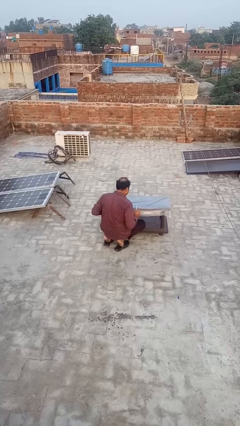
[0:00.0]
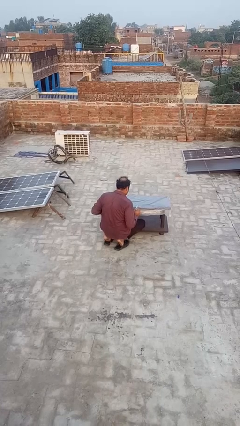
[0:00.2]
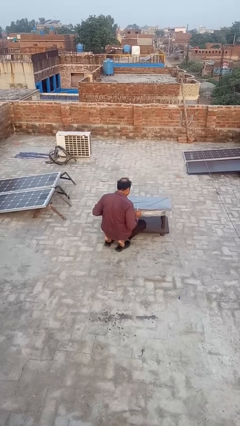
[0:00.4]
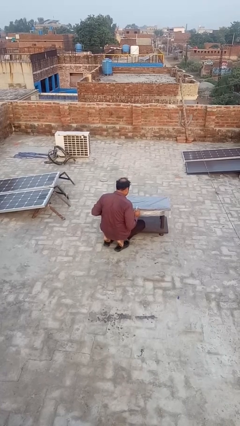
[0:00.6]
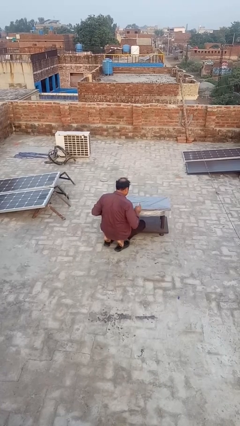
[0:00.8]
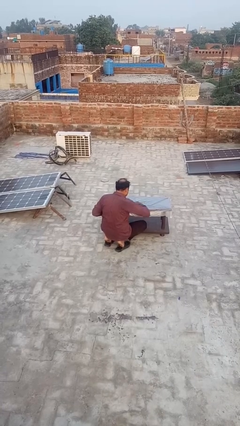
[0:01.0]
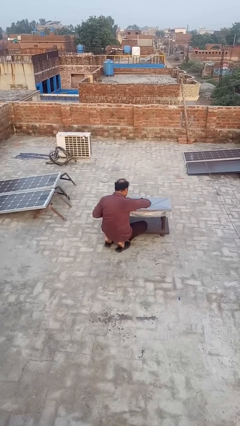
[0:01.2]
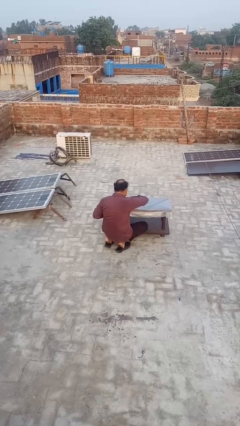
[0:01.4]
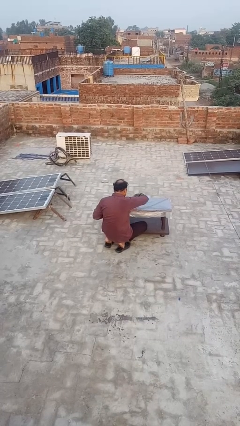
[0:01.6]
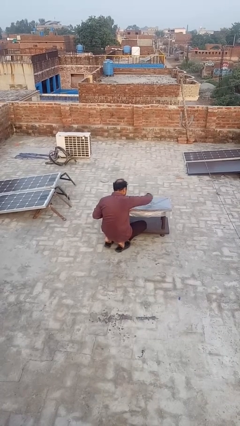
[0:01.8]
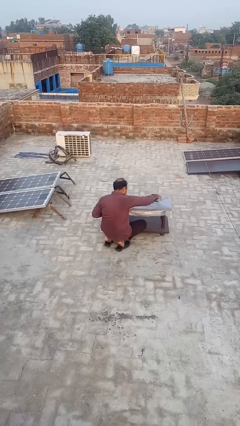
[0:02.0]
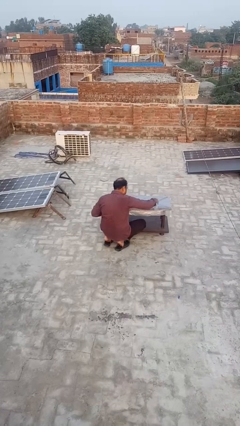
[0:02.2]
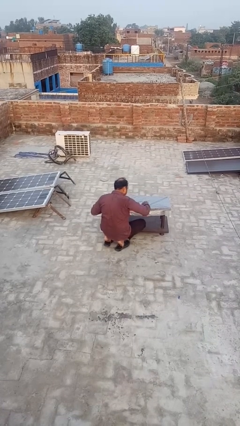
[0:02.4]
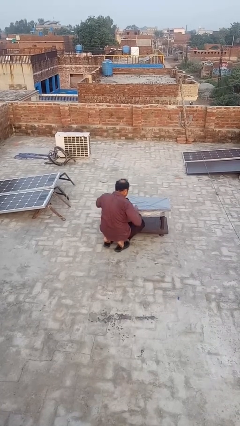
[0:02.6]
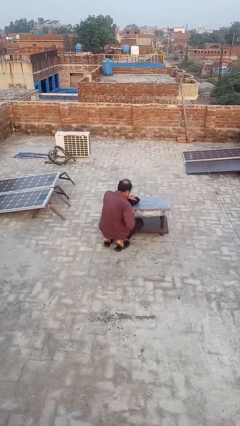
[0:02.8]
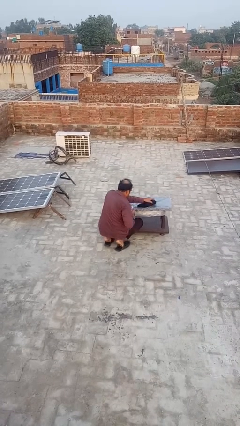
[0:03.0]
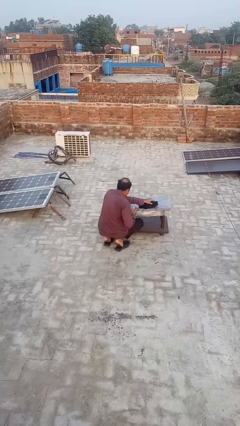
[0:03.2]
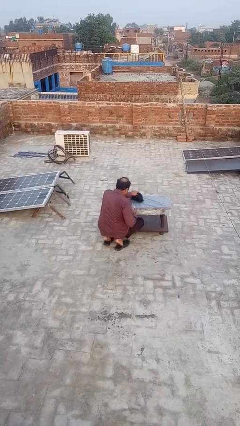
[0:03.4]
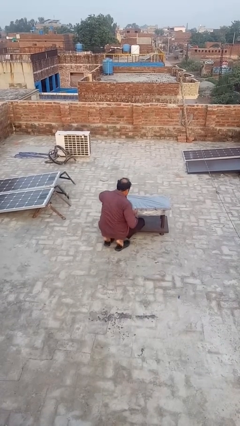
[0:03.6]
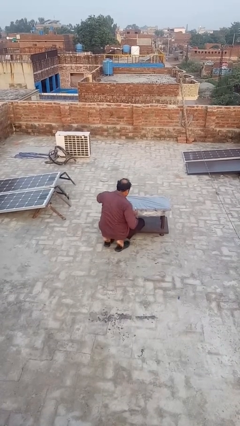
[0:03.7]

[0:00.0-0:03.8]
person sprays from bottle
